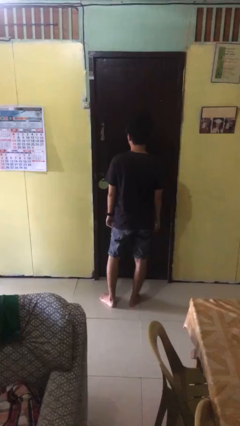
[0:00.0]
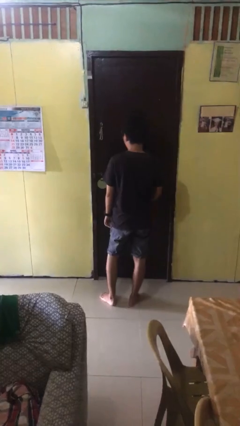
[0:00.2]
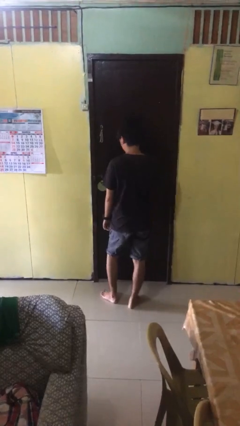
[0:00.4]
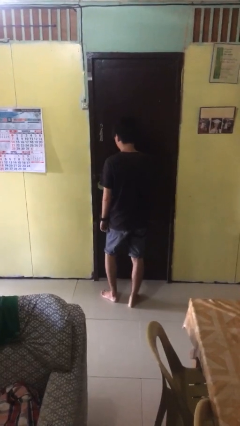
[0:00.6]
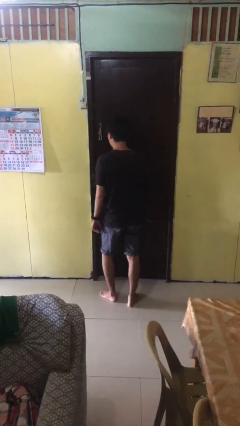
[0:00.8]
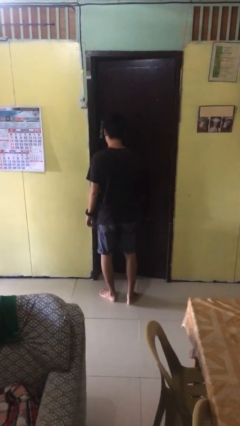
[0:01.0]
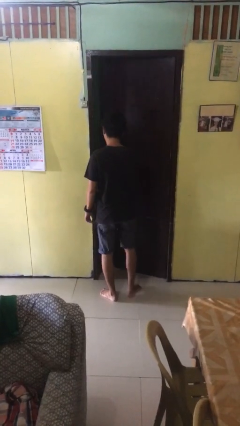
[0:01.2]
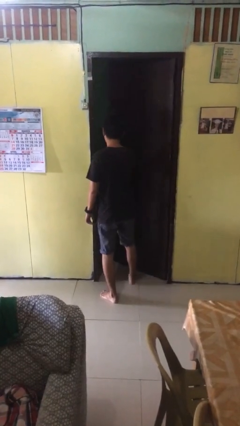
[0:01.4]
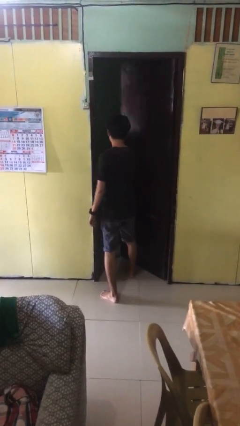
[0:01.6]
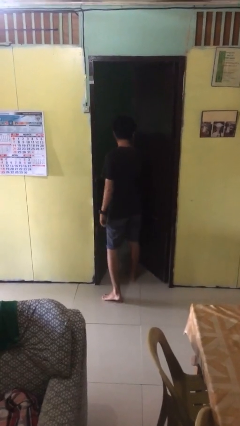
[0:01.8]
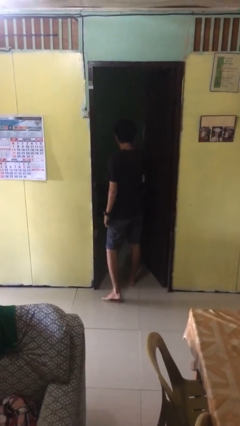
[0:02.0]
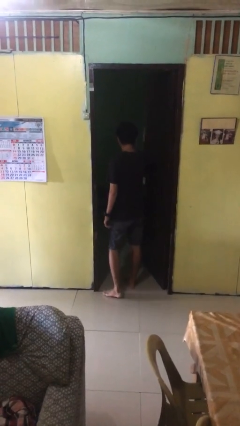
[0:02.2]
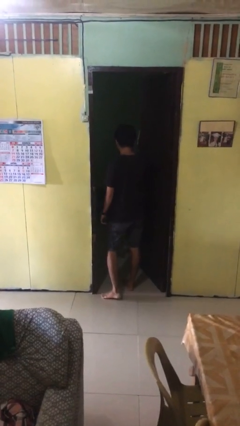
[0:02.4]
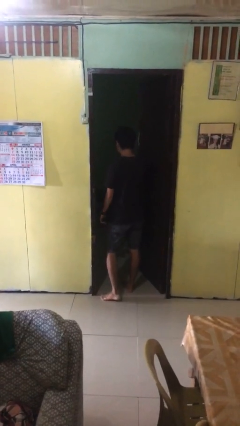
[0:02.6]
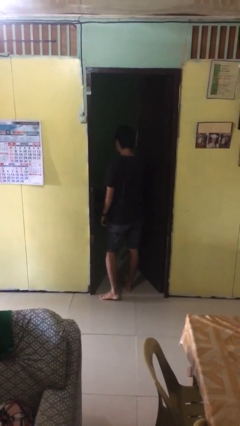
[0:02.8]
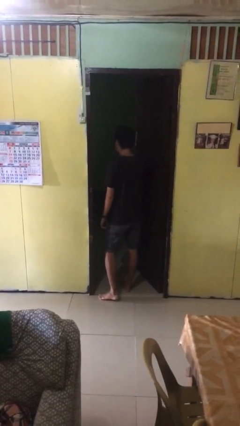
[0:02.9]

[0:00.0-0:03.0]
person opens facility door

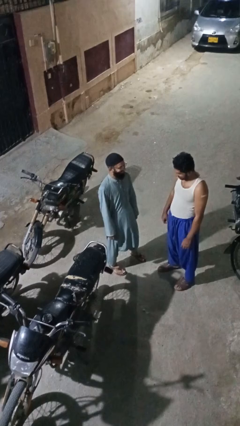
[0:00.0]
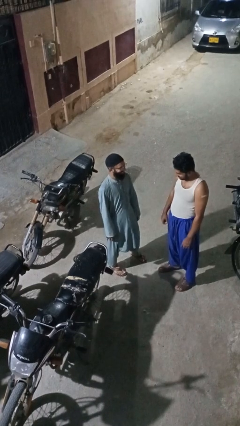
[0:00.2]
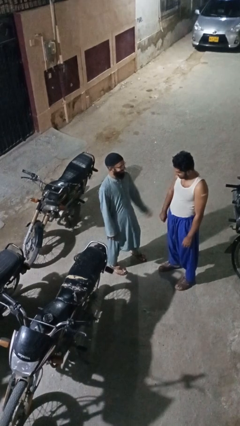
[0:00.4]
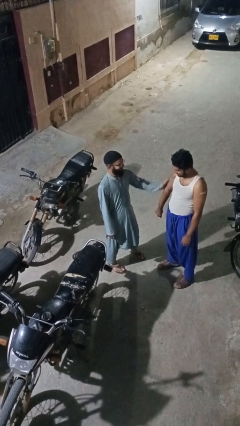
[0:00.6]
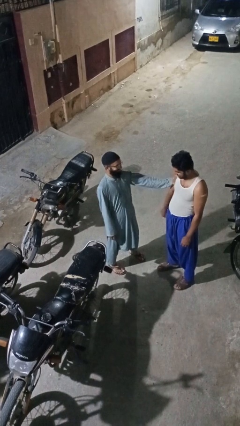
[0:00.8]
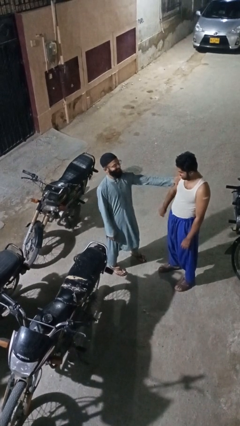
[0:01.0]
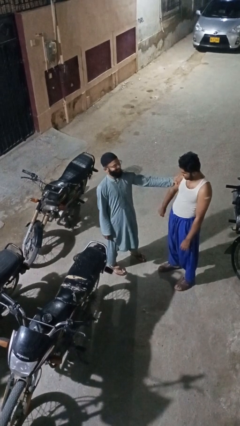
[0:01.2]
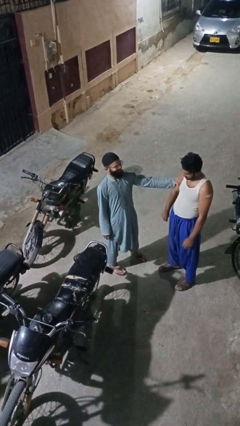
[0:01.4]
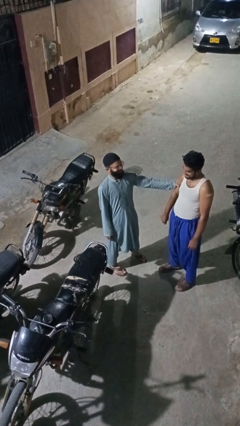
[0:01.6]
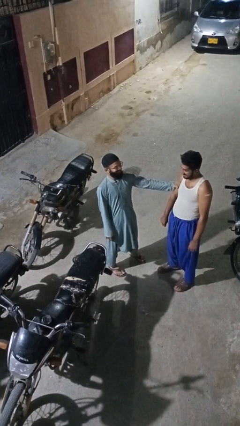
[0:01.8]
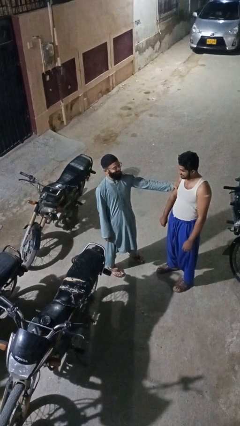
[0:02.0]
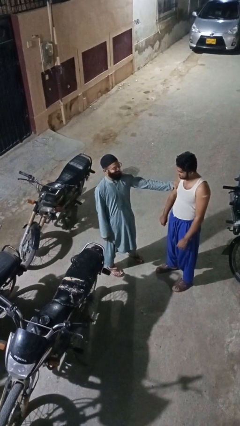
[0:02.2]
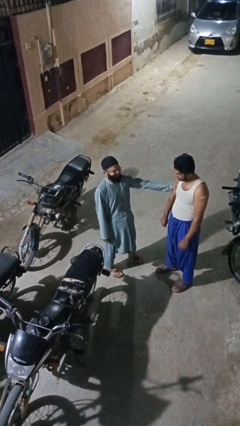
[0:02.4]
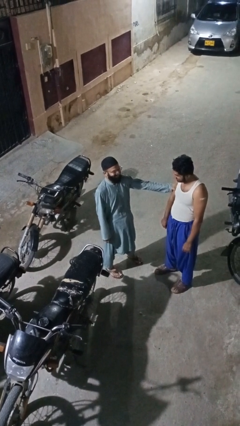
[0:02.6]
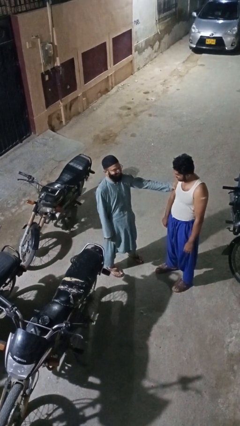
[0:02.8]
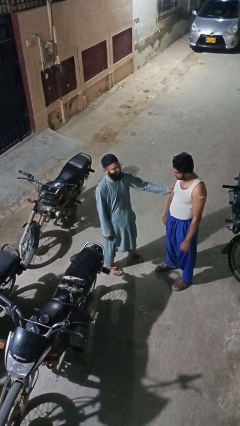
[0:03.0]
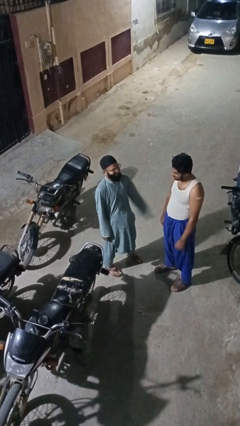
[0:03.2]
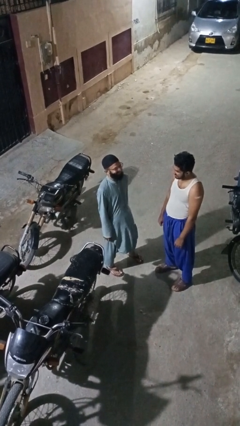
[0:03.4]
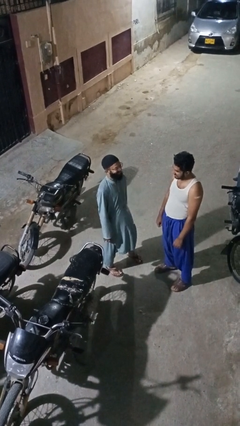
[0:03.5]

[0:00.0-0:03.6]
person grabs person by bicep

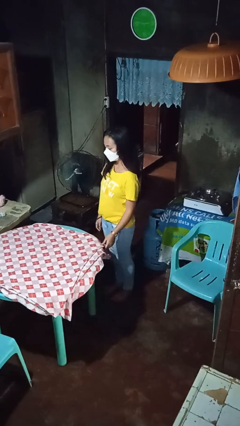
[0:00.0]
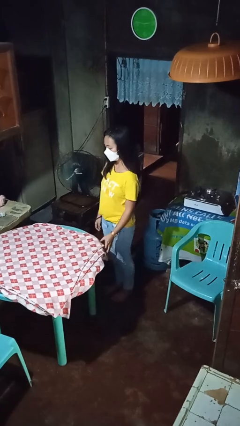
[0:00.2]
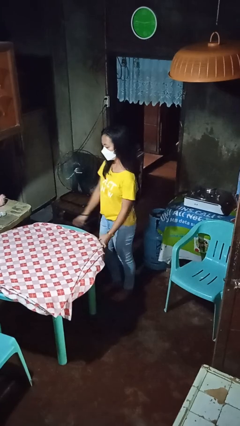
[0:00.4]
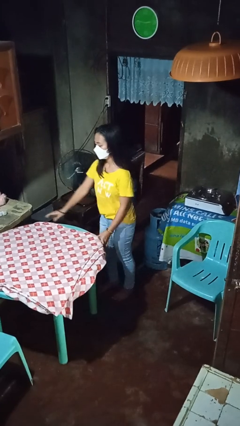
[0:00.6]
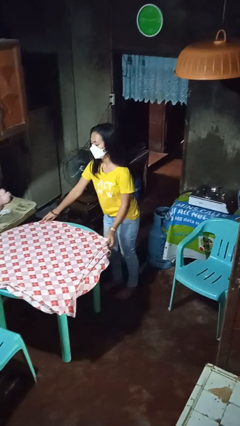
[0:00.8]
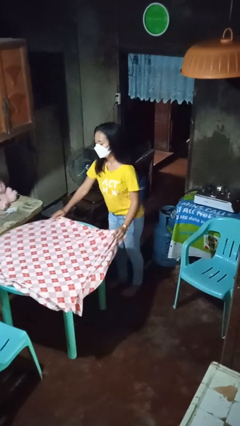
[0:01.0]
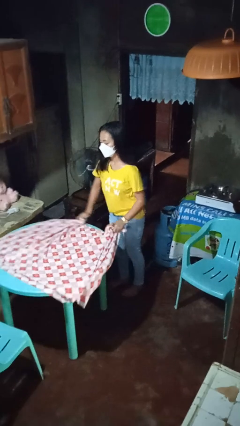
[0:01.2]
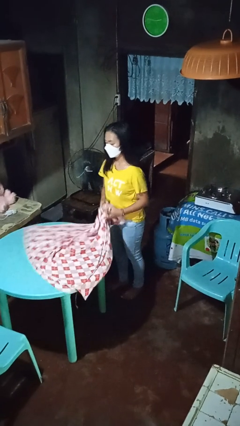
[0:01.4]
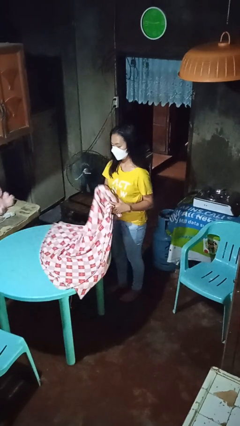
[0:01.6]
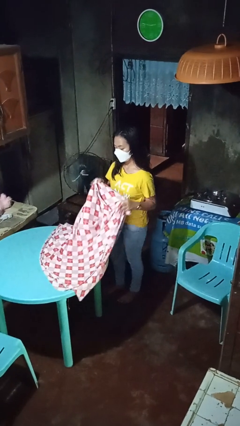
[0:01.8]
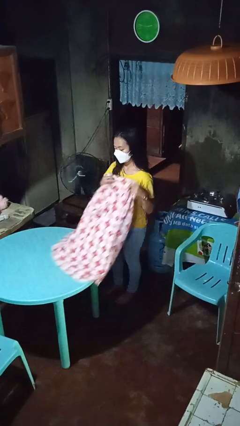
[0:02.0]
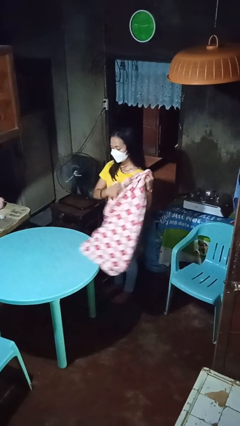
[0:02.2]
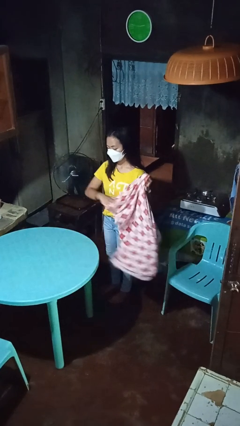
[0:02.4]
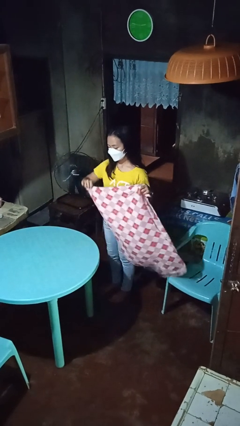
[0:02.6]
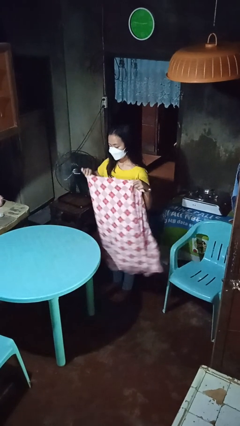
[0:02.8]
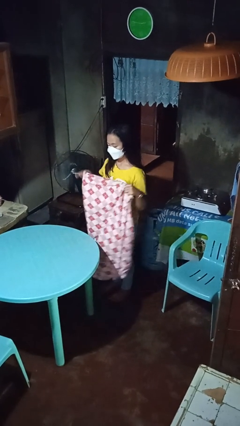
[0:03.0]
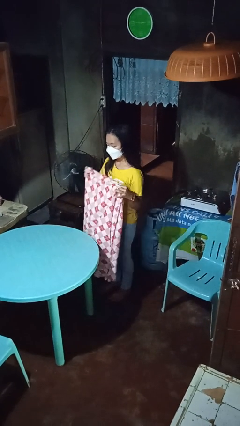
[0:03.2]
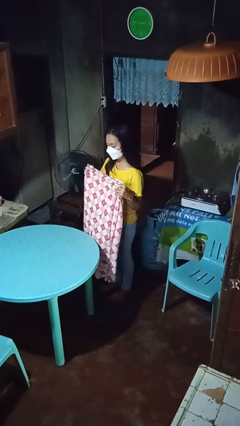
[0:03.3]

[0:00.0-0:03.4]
person folds tablecloth

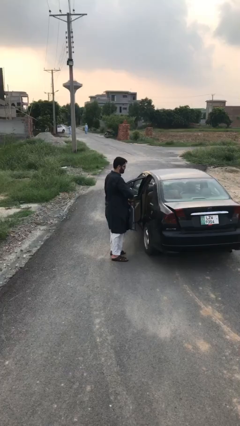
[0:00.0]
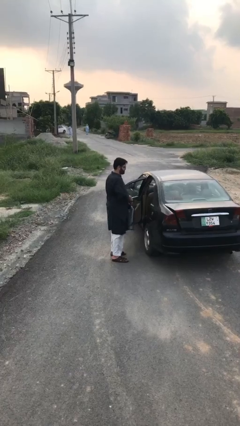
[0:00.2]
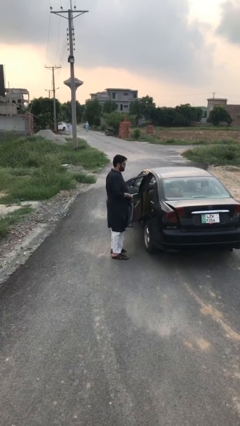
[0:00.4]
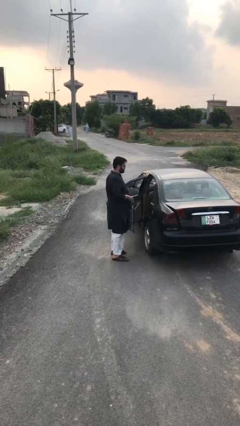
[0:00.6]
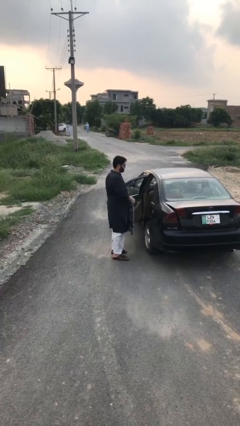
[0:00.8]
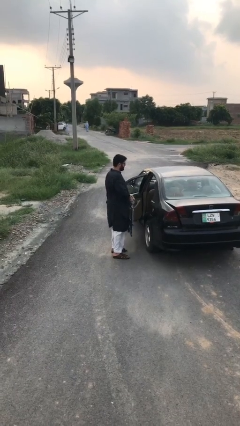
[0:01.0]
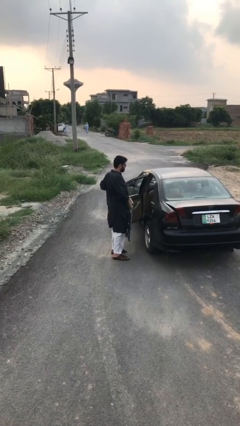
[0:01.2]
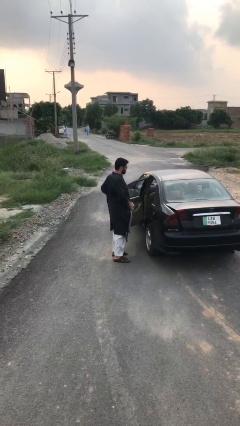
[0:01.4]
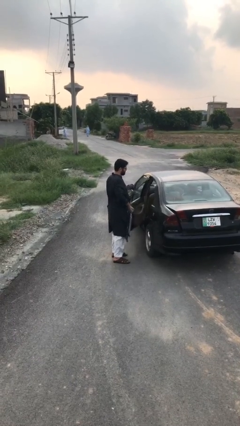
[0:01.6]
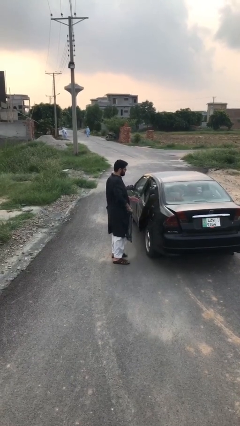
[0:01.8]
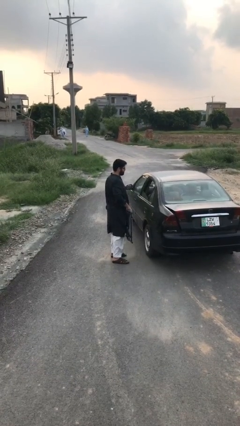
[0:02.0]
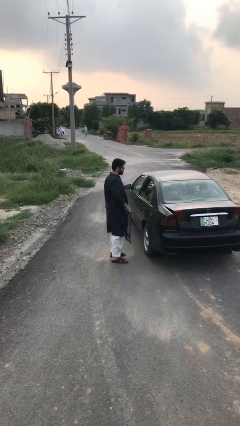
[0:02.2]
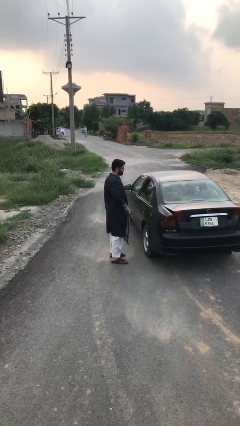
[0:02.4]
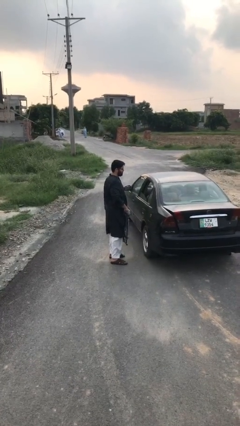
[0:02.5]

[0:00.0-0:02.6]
person closes car door

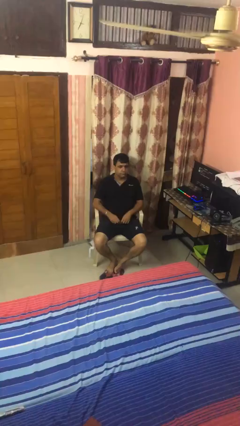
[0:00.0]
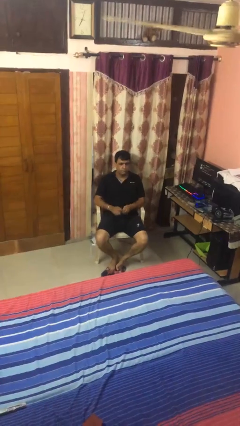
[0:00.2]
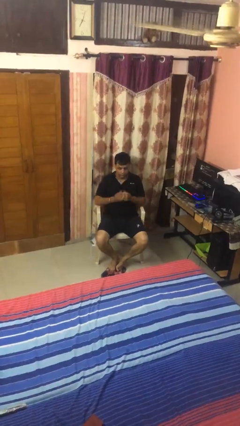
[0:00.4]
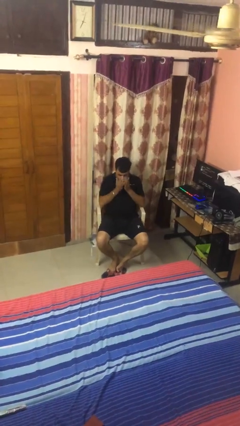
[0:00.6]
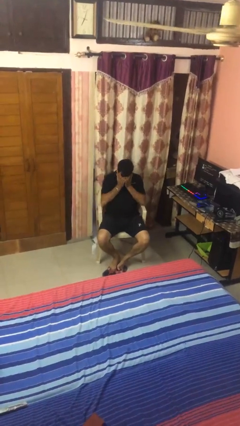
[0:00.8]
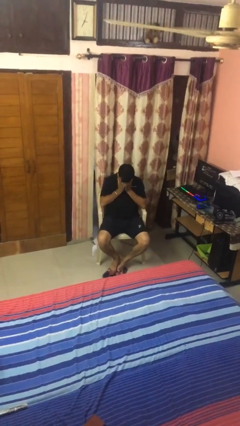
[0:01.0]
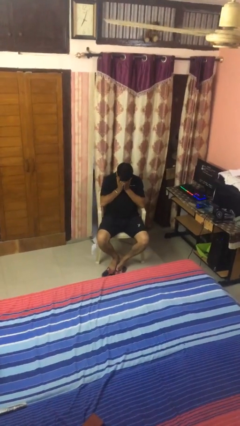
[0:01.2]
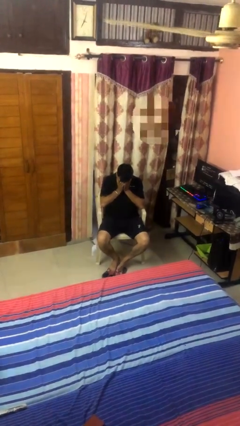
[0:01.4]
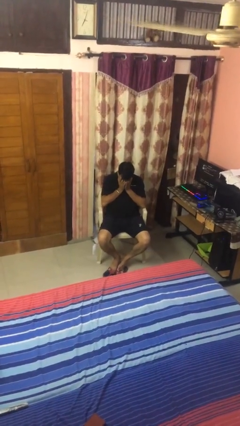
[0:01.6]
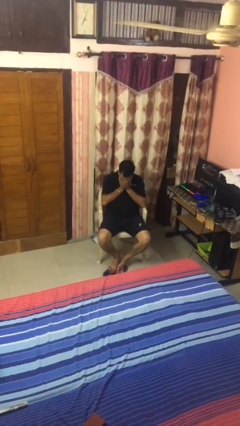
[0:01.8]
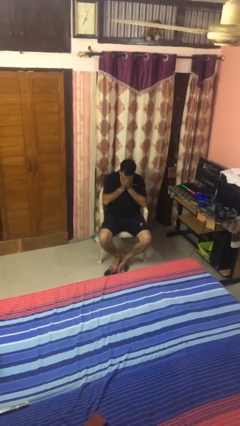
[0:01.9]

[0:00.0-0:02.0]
person covers face with hands

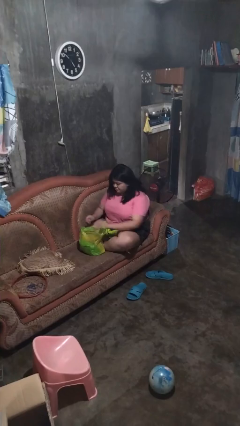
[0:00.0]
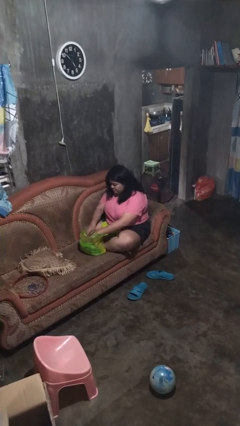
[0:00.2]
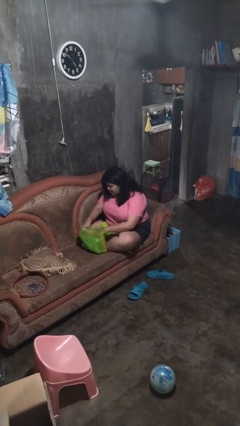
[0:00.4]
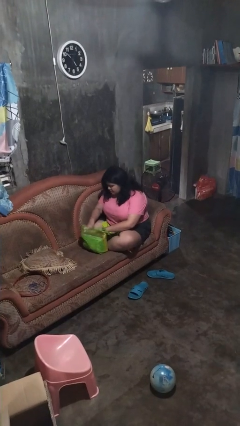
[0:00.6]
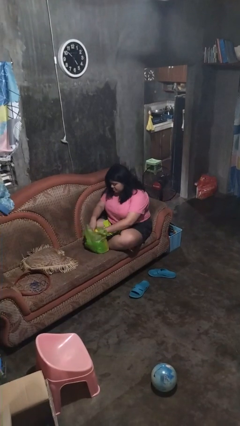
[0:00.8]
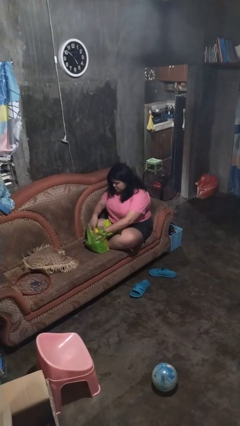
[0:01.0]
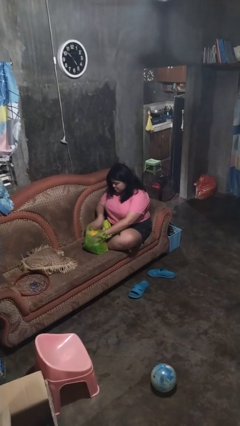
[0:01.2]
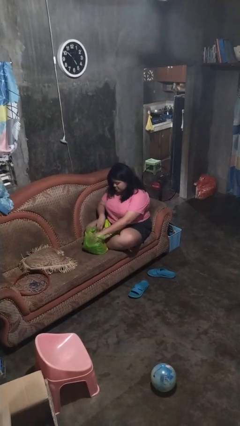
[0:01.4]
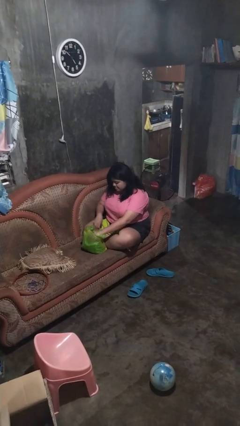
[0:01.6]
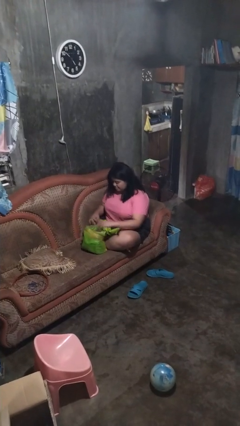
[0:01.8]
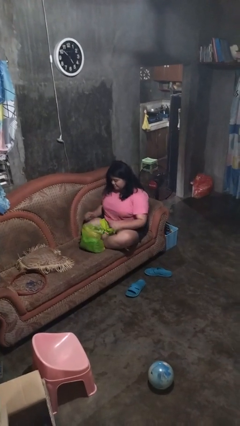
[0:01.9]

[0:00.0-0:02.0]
person searches in bag

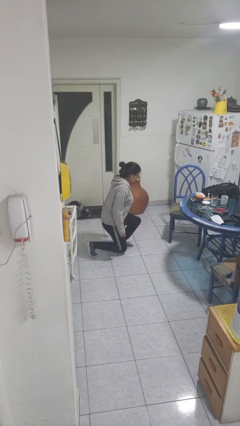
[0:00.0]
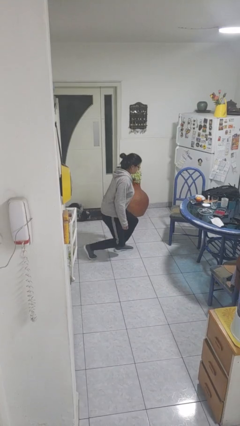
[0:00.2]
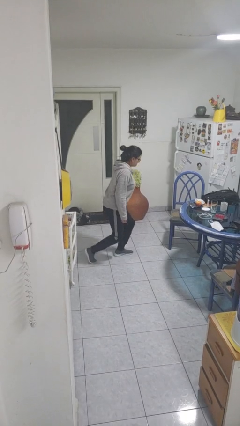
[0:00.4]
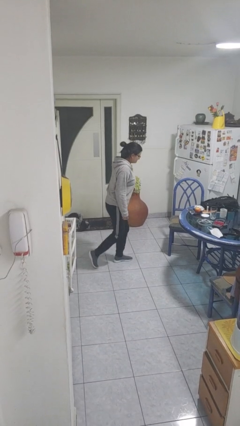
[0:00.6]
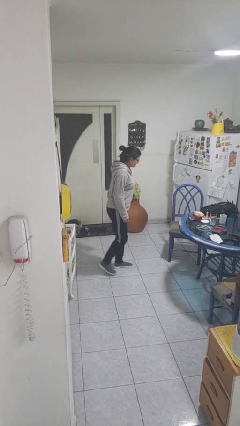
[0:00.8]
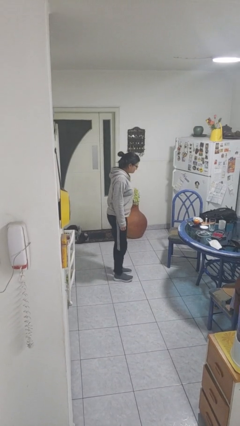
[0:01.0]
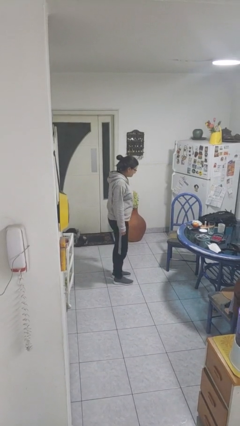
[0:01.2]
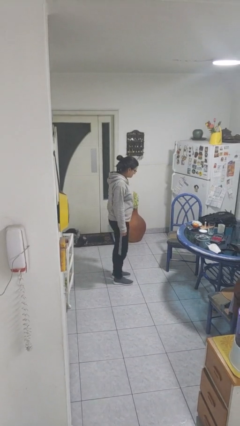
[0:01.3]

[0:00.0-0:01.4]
person stands up from floor
